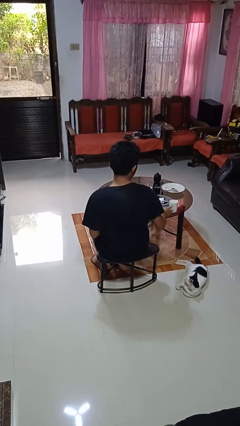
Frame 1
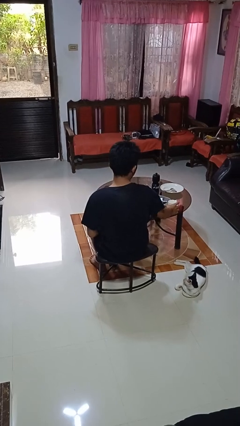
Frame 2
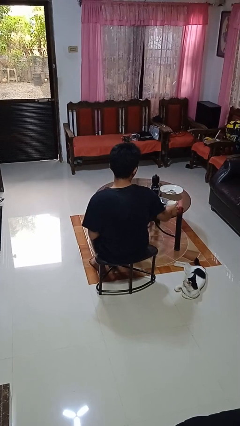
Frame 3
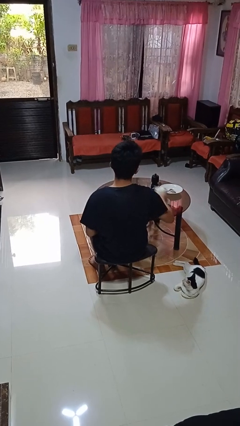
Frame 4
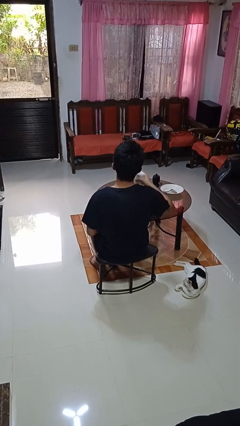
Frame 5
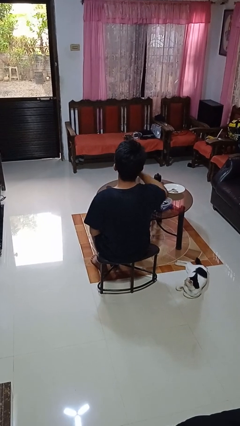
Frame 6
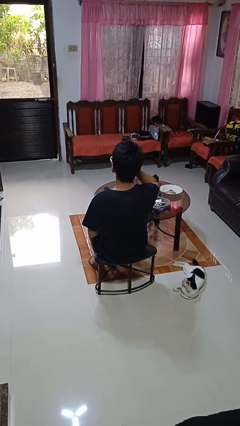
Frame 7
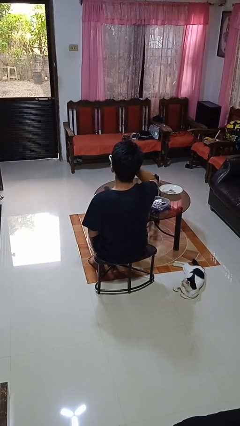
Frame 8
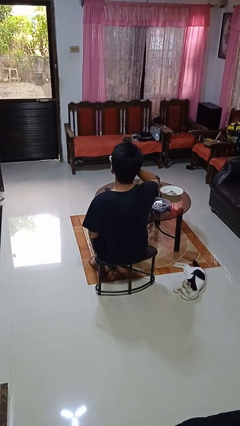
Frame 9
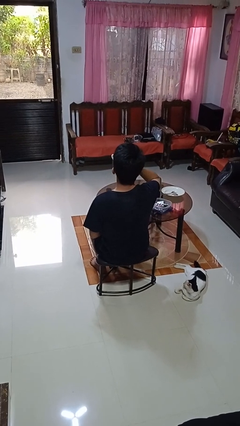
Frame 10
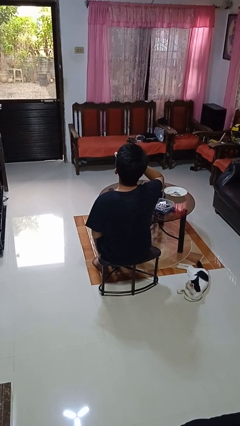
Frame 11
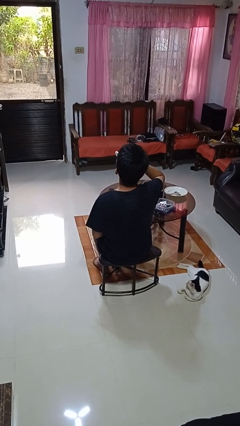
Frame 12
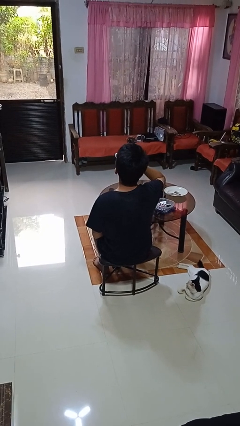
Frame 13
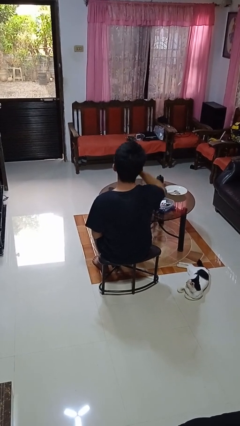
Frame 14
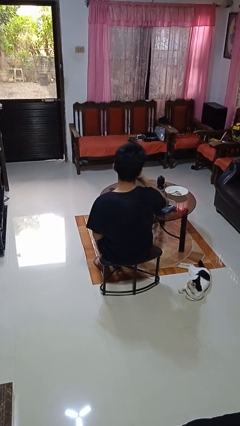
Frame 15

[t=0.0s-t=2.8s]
person drinks from cup

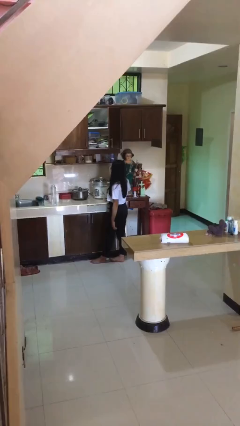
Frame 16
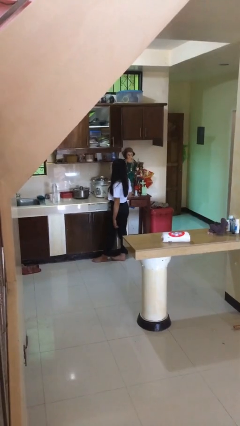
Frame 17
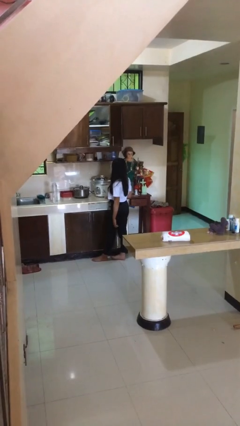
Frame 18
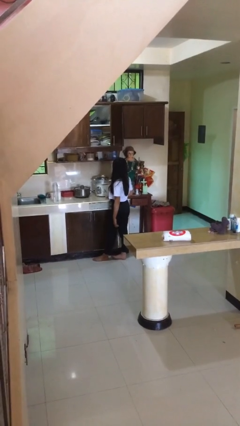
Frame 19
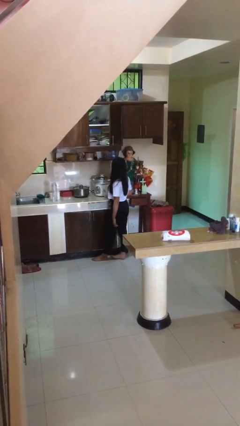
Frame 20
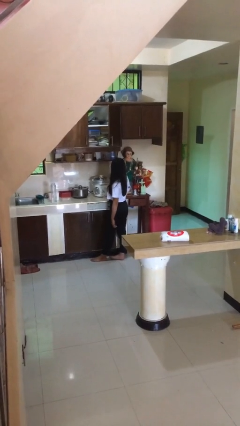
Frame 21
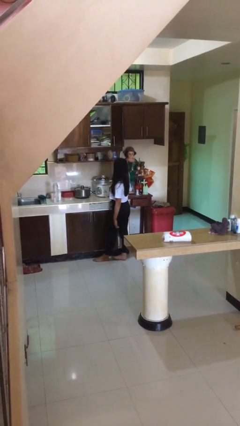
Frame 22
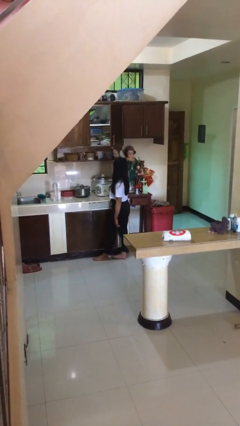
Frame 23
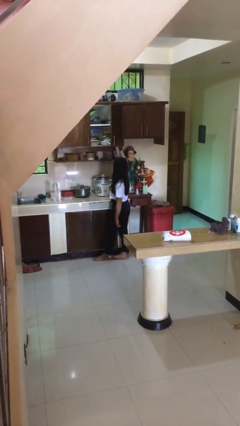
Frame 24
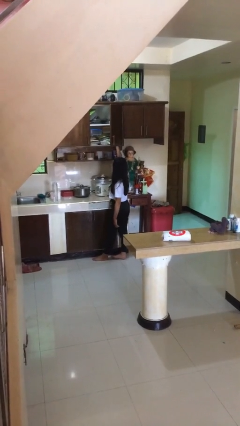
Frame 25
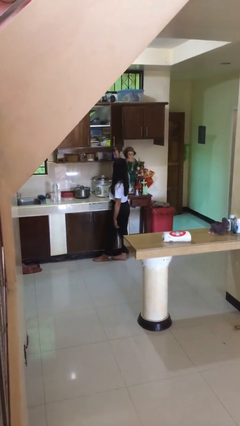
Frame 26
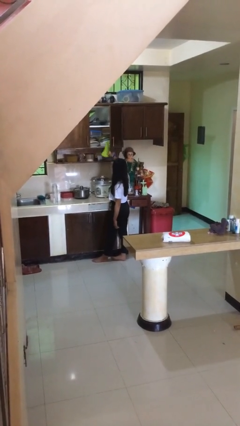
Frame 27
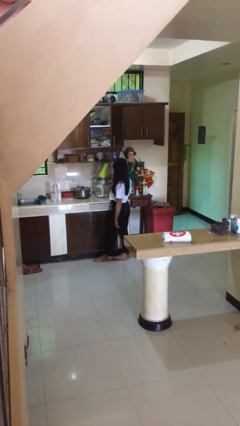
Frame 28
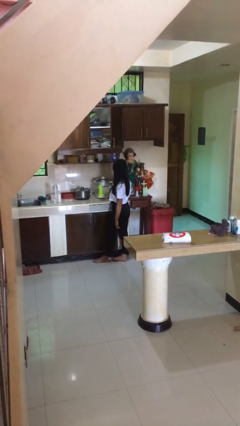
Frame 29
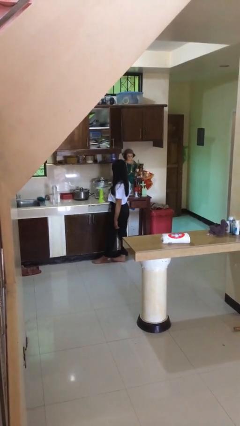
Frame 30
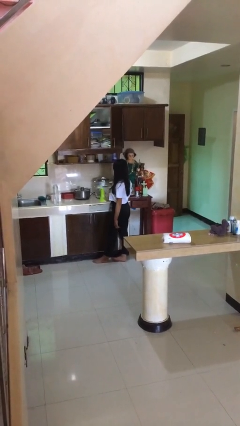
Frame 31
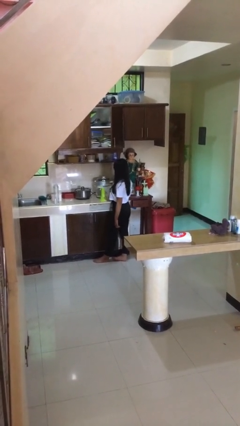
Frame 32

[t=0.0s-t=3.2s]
person picks up object from cabinet

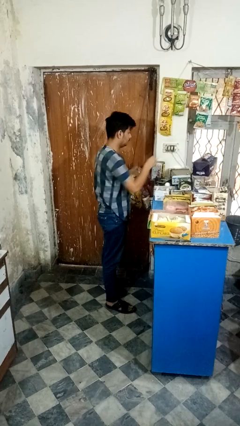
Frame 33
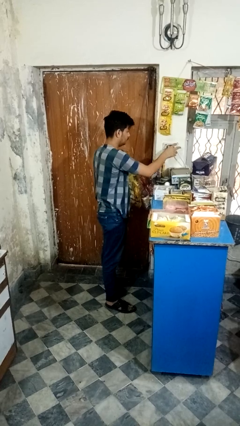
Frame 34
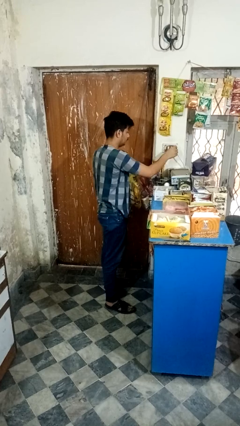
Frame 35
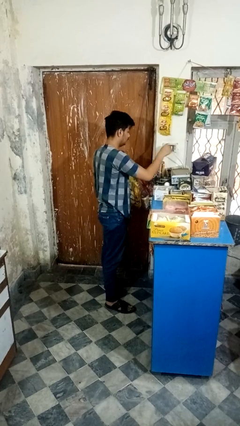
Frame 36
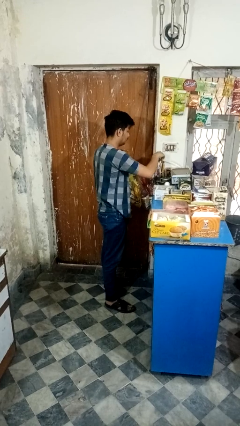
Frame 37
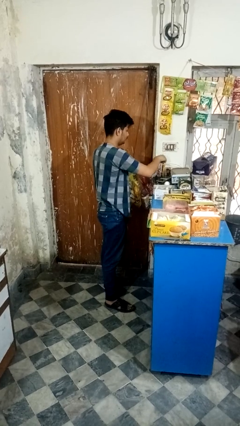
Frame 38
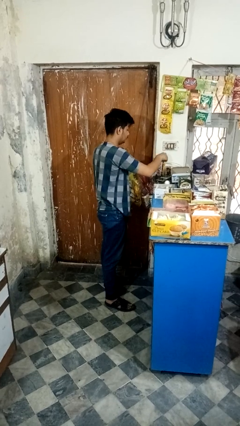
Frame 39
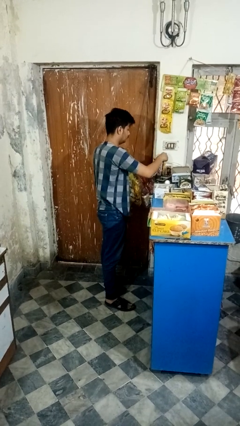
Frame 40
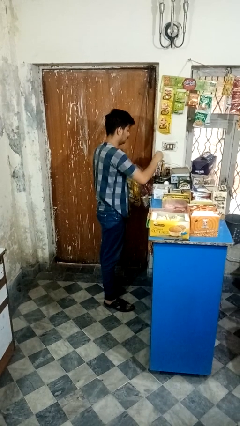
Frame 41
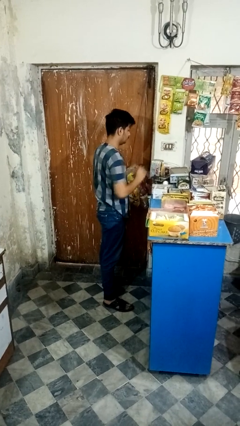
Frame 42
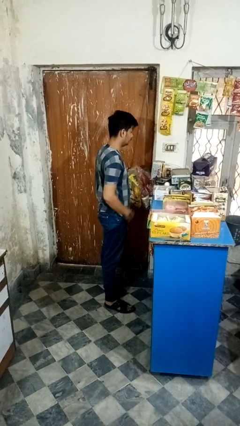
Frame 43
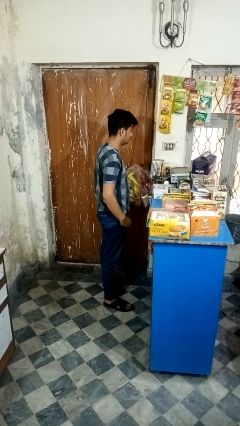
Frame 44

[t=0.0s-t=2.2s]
person unplugs from electrical socket

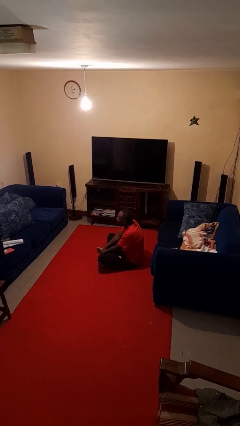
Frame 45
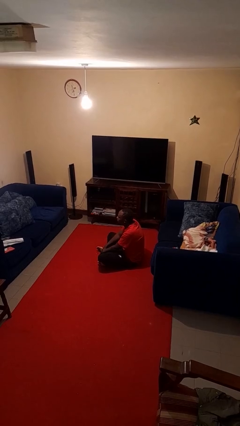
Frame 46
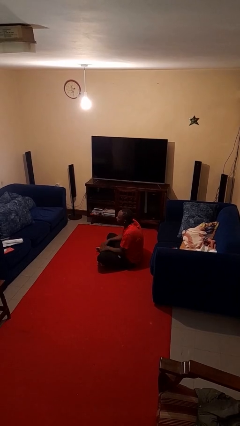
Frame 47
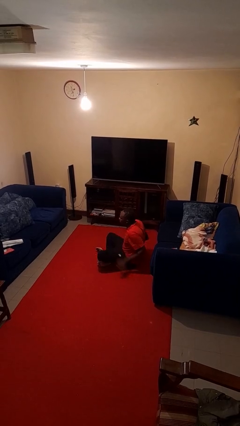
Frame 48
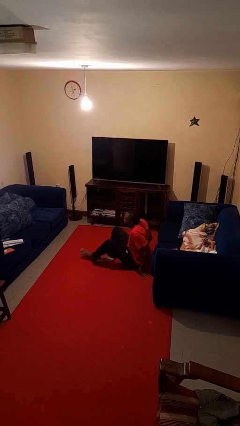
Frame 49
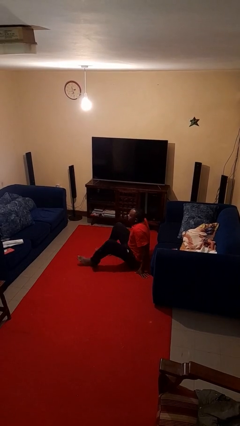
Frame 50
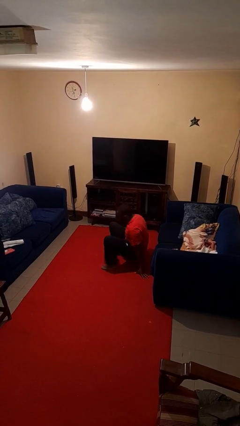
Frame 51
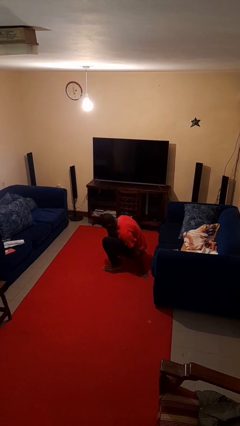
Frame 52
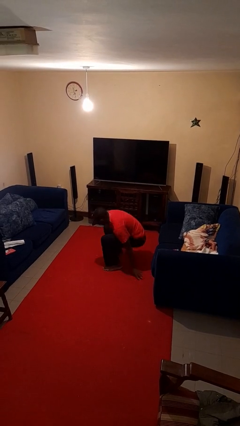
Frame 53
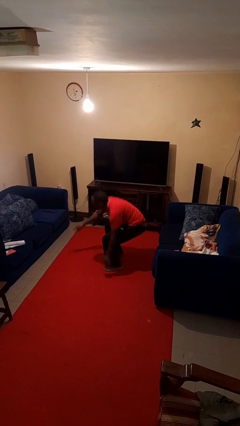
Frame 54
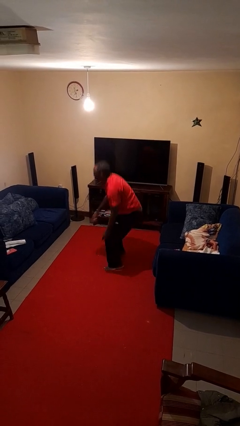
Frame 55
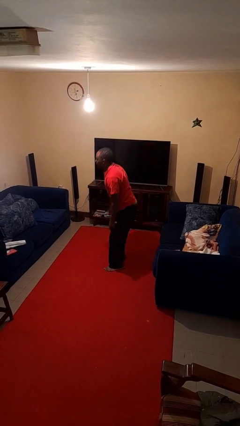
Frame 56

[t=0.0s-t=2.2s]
person stands up from floor

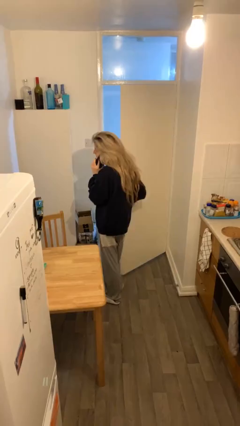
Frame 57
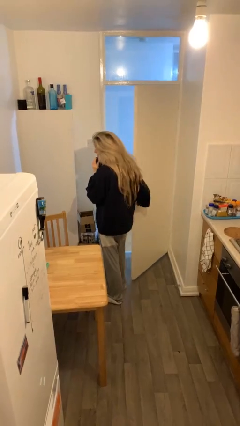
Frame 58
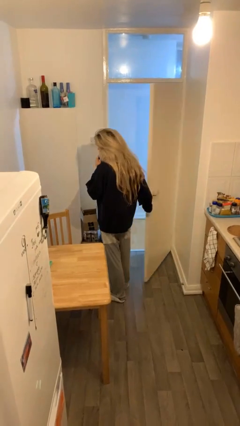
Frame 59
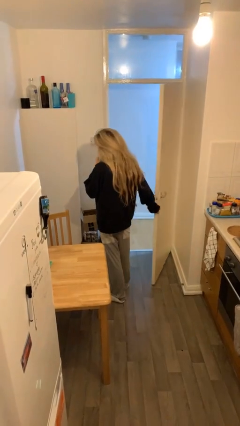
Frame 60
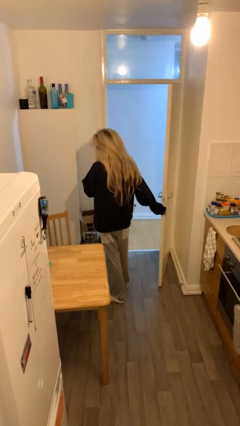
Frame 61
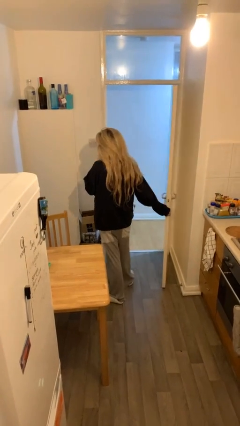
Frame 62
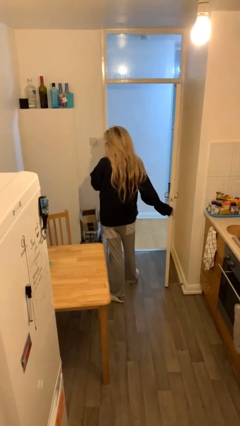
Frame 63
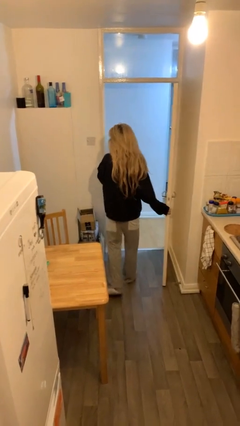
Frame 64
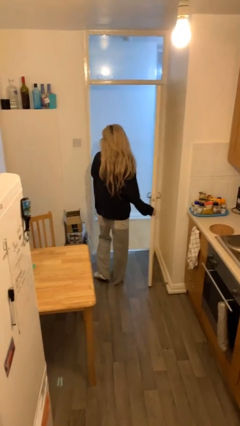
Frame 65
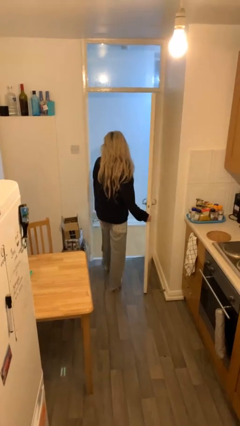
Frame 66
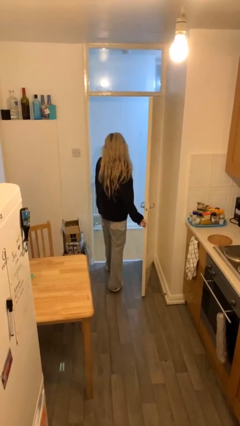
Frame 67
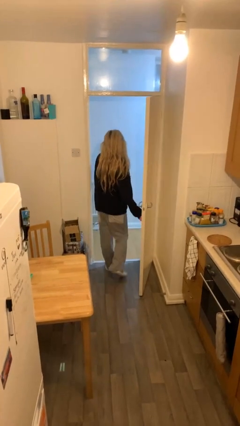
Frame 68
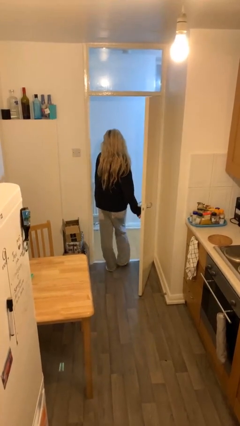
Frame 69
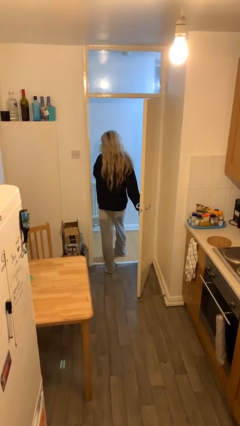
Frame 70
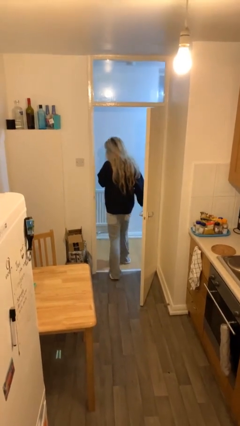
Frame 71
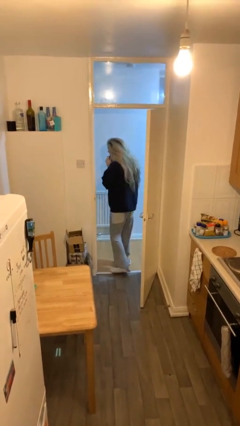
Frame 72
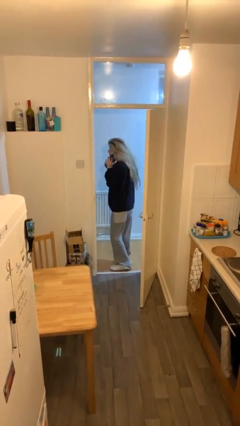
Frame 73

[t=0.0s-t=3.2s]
person exits scene through structure

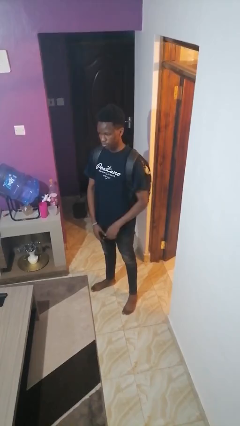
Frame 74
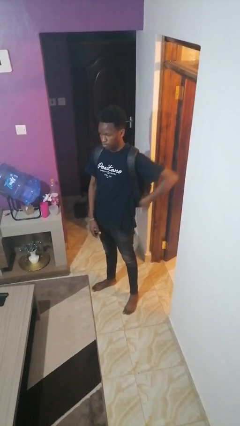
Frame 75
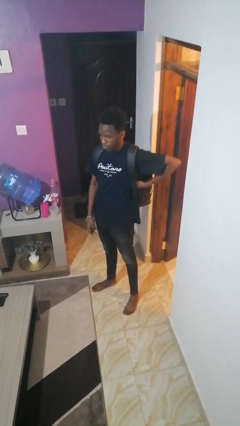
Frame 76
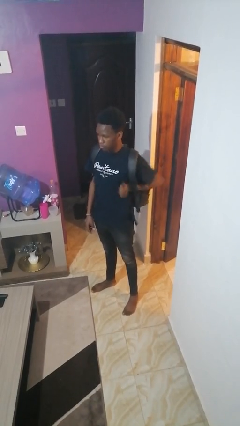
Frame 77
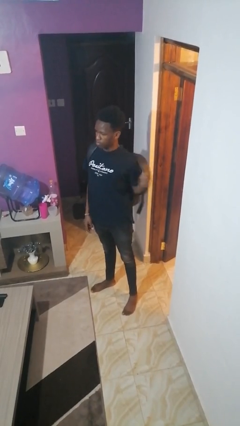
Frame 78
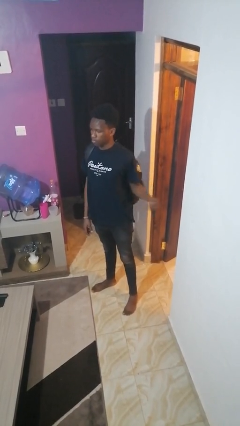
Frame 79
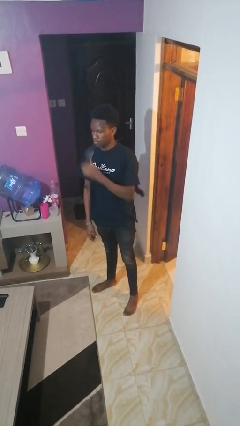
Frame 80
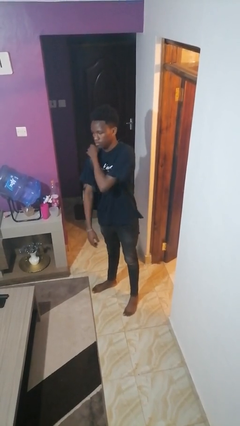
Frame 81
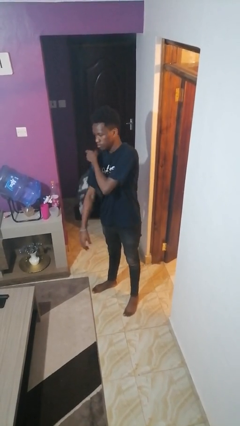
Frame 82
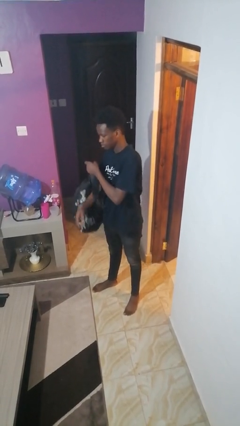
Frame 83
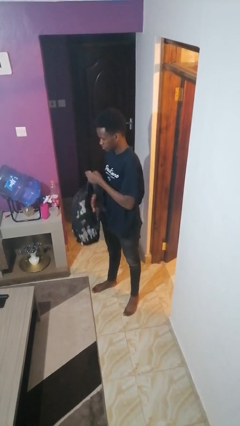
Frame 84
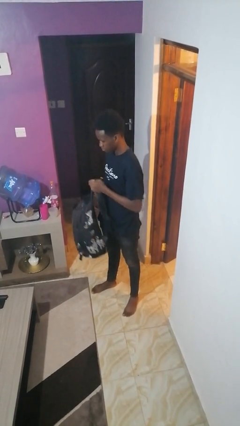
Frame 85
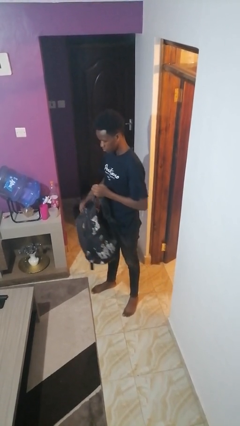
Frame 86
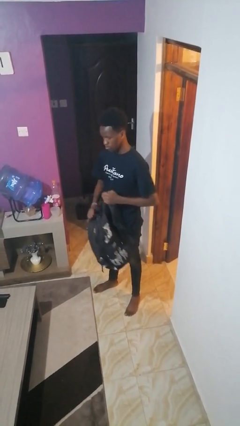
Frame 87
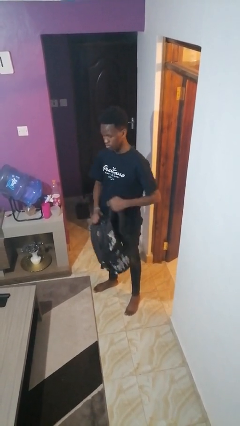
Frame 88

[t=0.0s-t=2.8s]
person takes off backpack

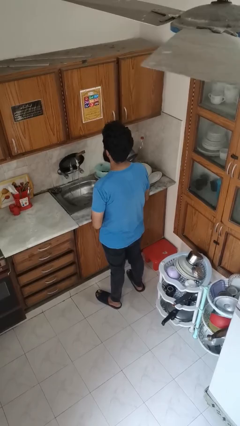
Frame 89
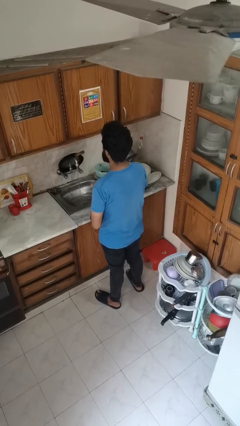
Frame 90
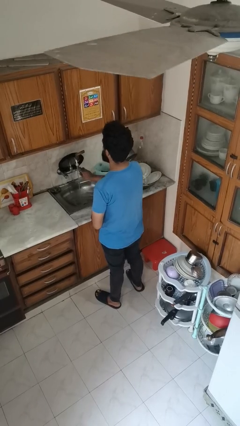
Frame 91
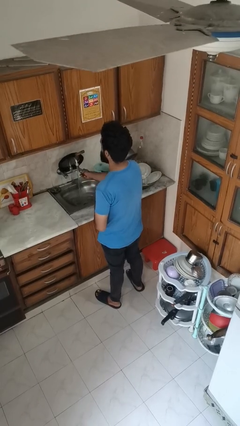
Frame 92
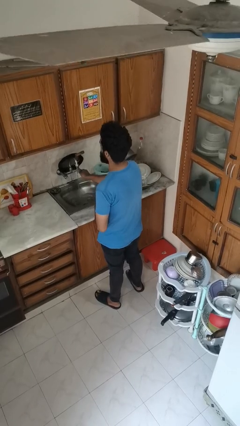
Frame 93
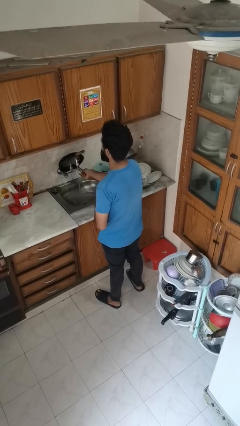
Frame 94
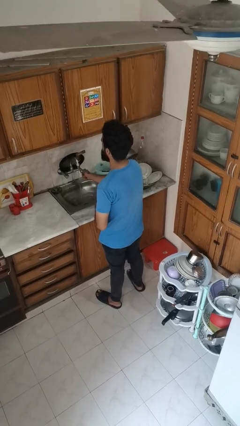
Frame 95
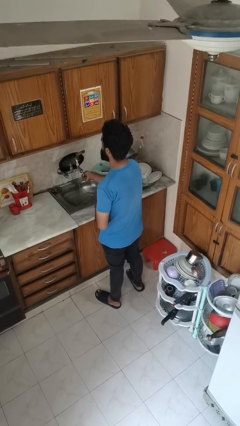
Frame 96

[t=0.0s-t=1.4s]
person turns off faucet
